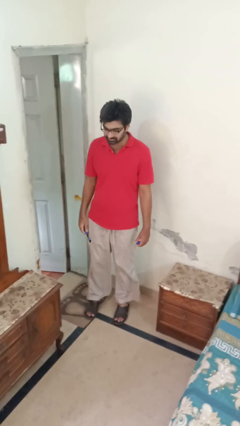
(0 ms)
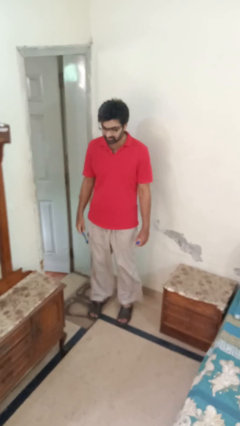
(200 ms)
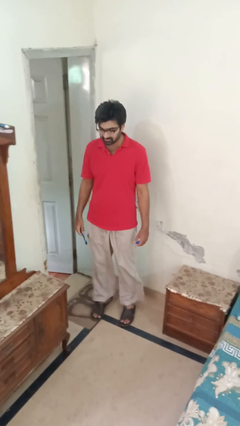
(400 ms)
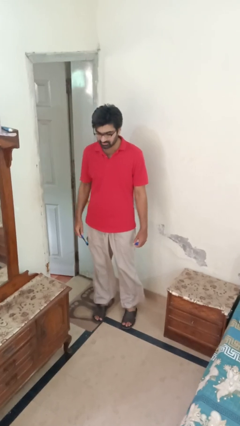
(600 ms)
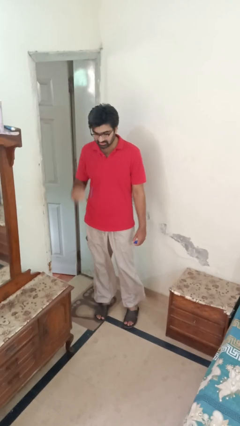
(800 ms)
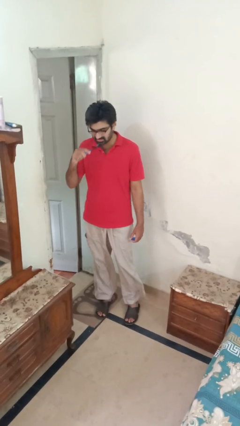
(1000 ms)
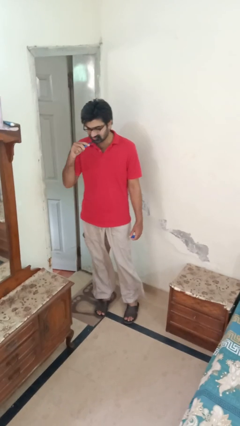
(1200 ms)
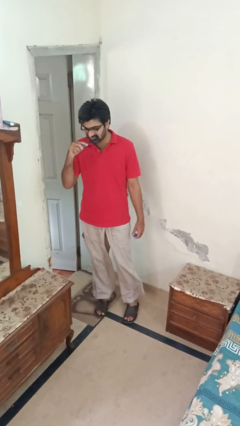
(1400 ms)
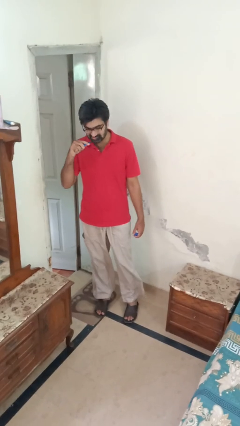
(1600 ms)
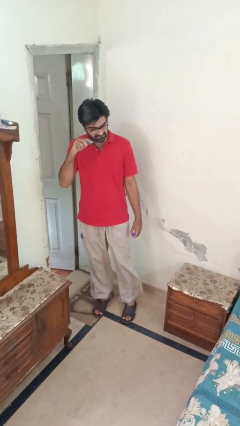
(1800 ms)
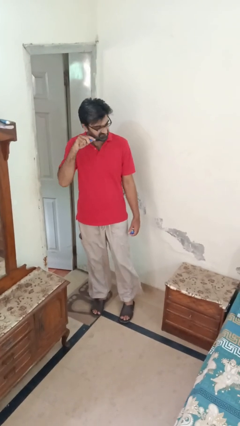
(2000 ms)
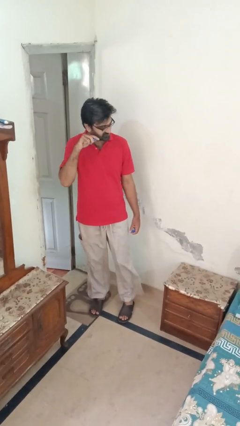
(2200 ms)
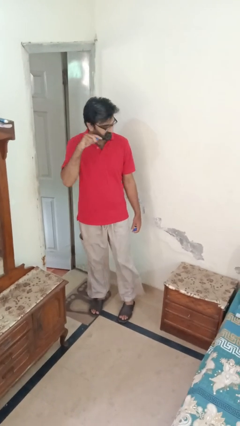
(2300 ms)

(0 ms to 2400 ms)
person brushes teeth

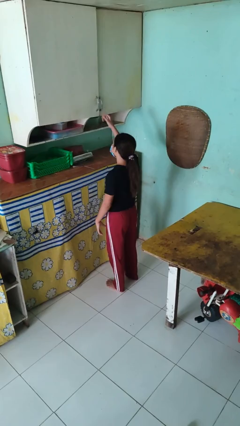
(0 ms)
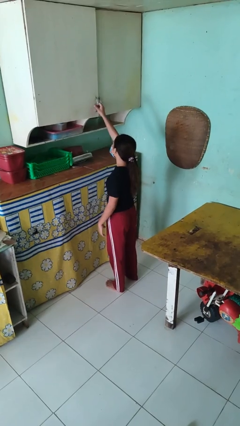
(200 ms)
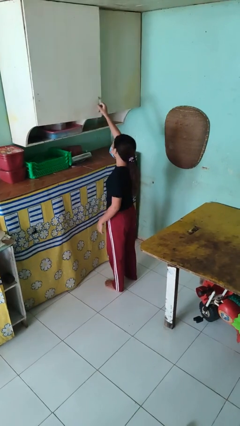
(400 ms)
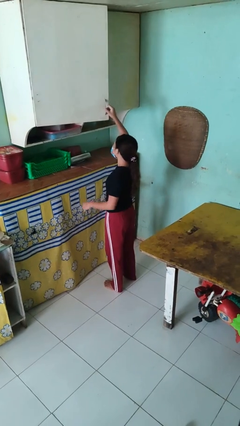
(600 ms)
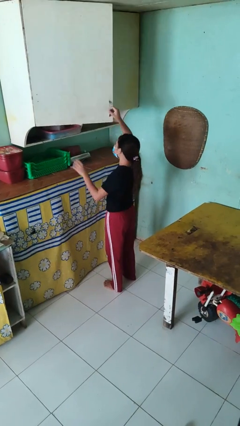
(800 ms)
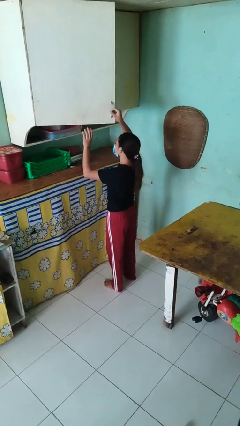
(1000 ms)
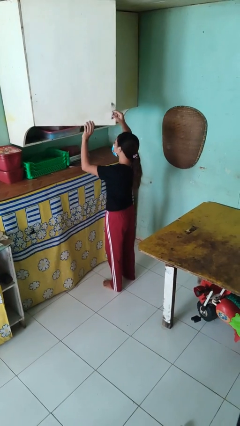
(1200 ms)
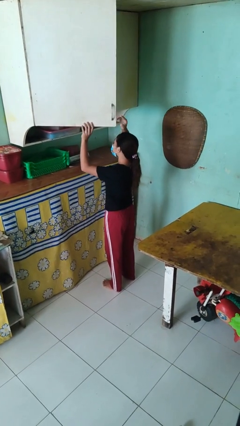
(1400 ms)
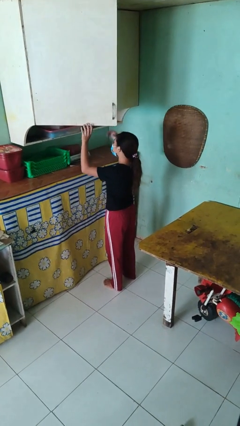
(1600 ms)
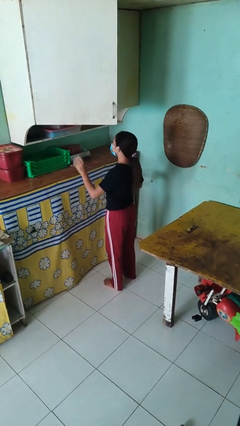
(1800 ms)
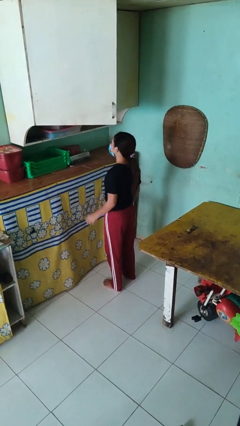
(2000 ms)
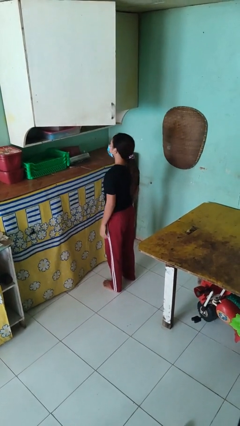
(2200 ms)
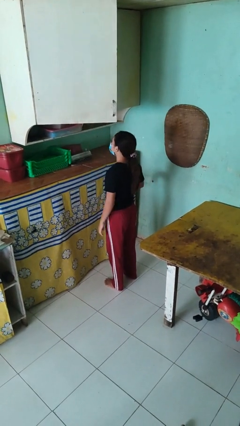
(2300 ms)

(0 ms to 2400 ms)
person opens cabinet

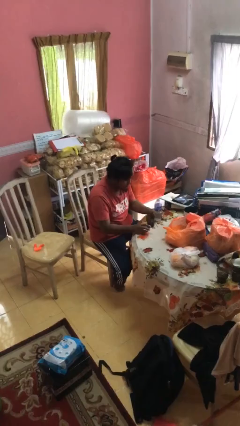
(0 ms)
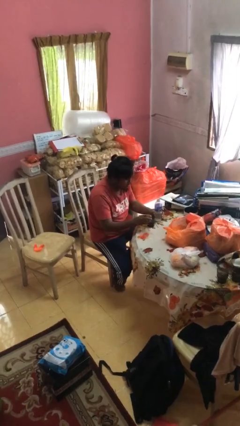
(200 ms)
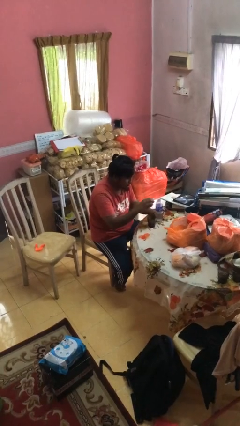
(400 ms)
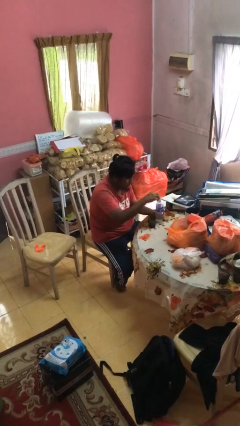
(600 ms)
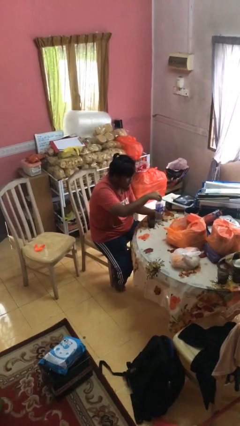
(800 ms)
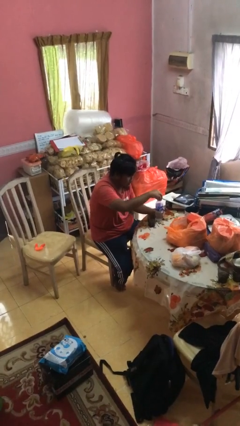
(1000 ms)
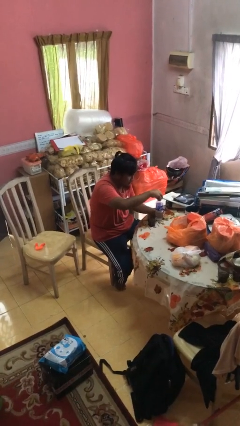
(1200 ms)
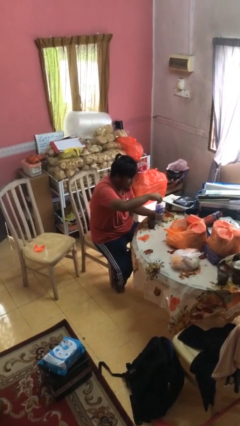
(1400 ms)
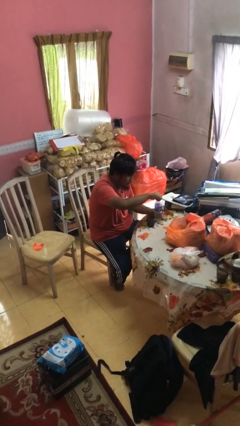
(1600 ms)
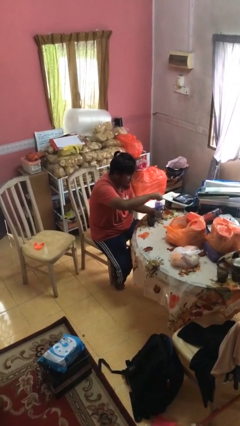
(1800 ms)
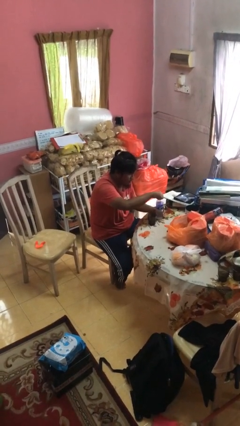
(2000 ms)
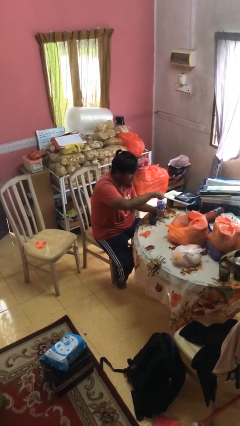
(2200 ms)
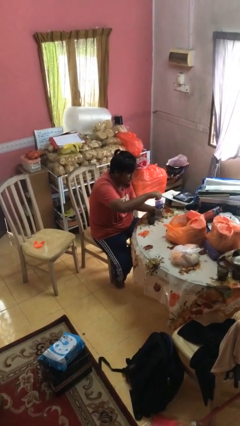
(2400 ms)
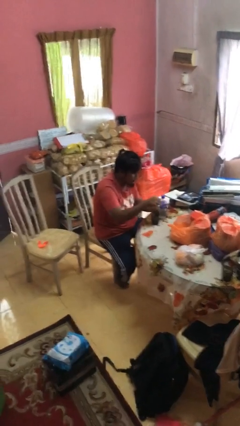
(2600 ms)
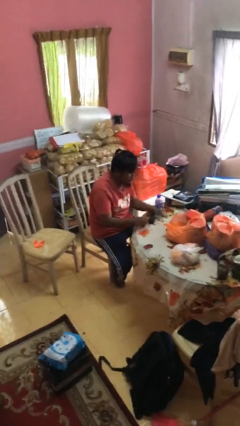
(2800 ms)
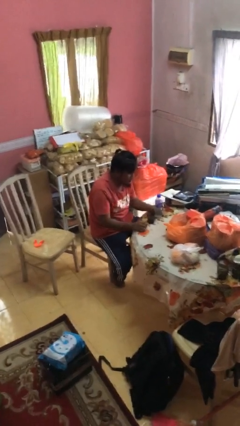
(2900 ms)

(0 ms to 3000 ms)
person screws lid to bottle

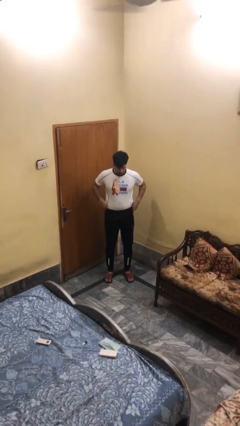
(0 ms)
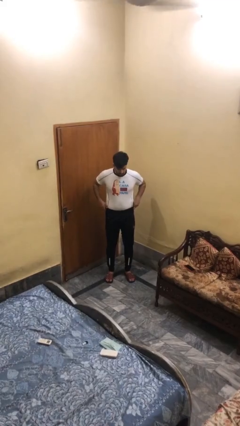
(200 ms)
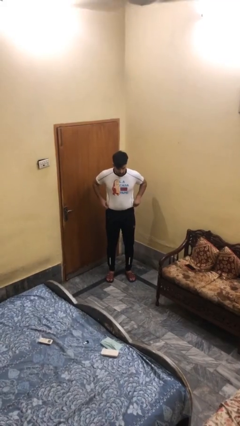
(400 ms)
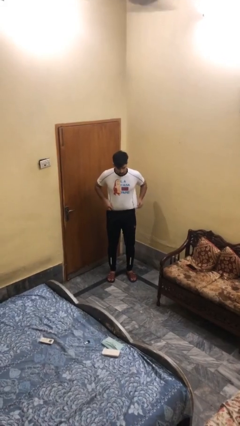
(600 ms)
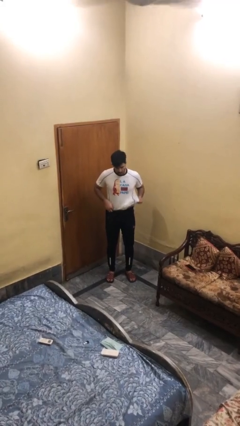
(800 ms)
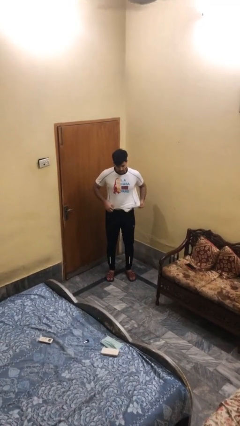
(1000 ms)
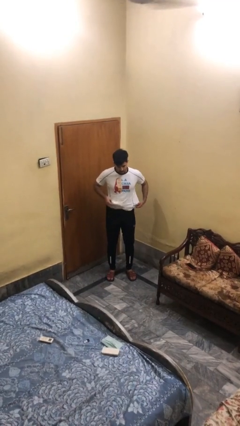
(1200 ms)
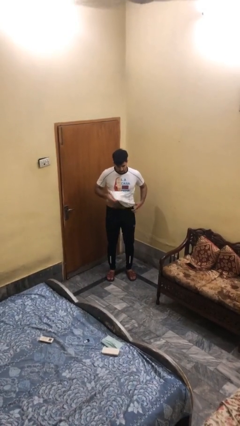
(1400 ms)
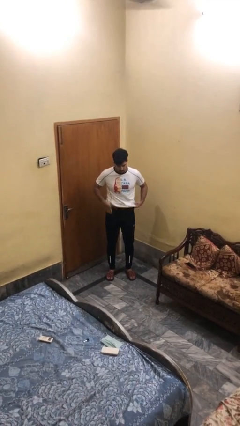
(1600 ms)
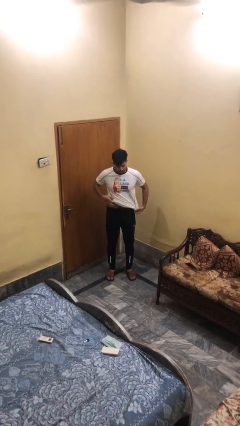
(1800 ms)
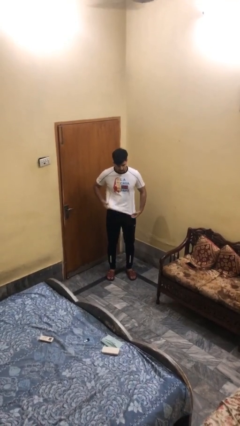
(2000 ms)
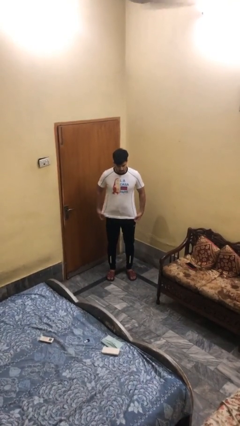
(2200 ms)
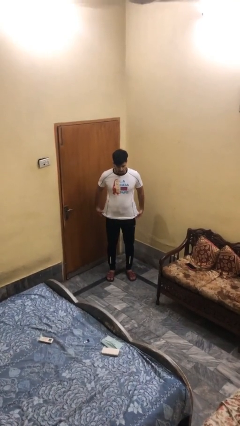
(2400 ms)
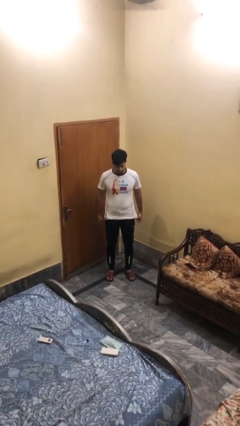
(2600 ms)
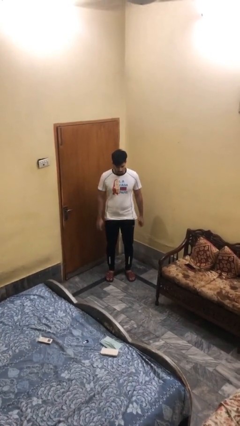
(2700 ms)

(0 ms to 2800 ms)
person untucks shirt

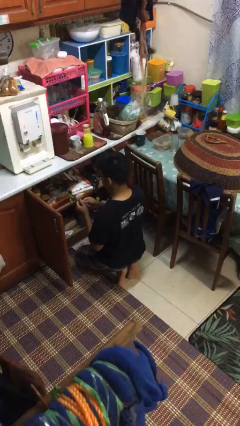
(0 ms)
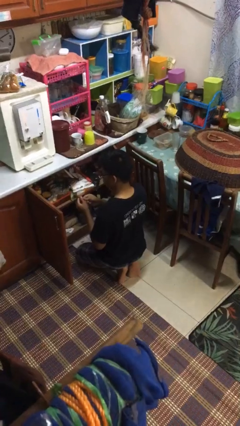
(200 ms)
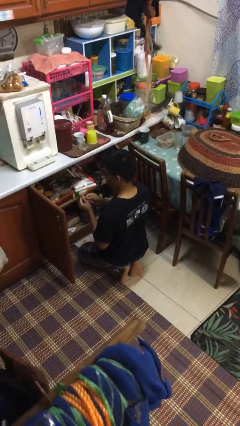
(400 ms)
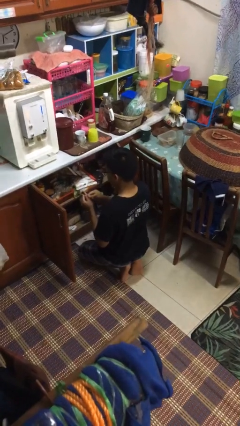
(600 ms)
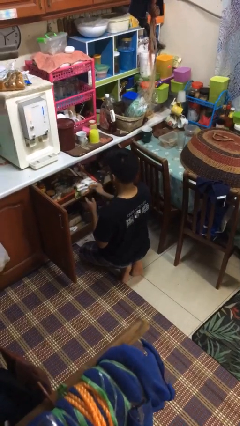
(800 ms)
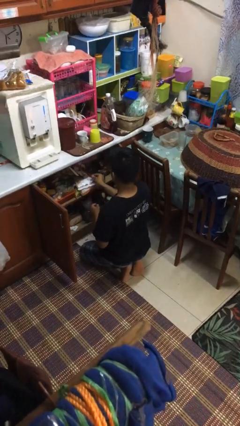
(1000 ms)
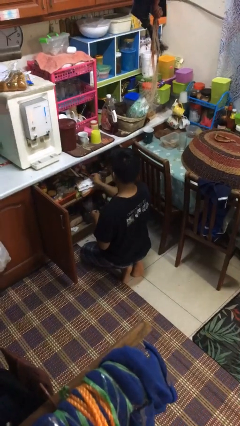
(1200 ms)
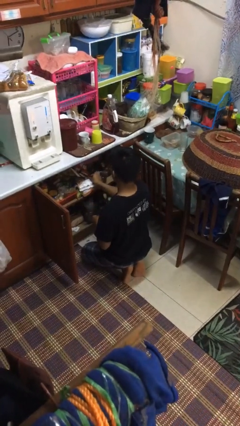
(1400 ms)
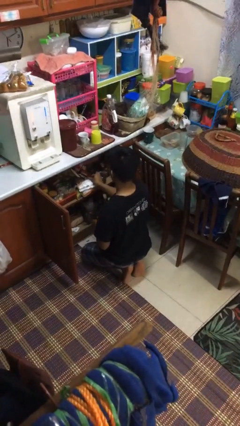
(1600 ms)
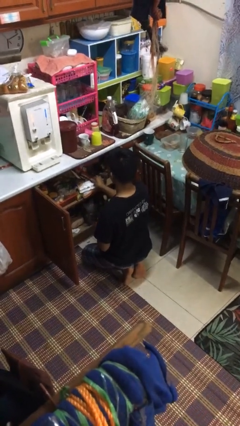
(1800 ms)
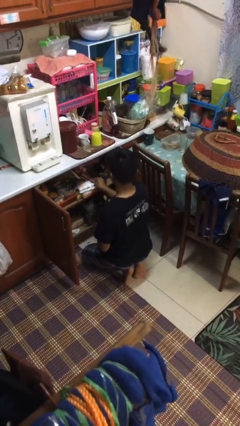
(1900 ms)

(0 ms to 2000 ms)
person puts object into kitchen drawer

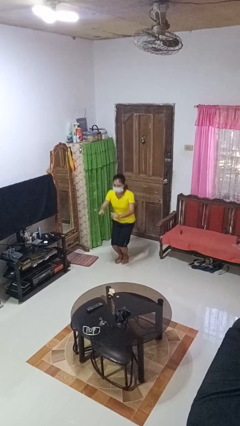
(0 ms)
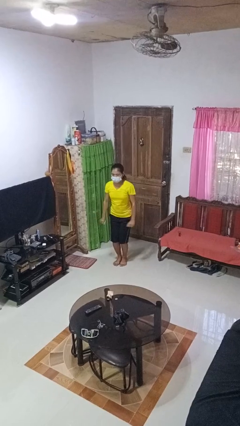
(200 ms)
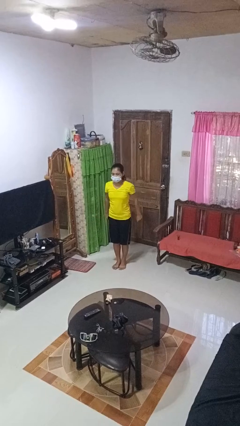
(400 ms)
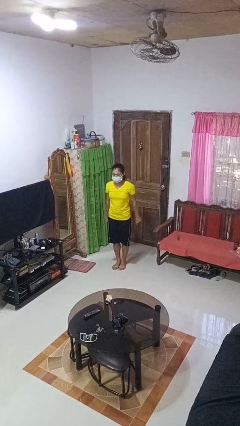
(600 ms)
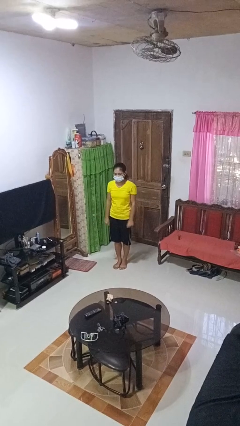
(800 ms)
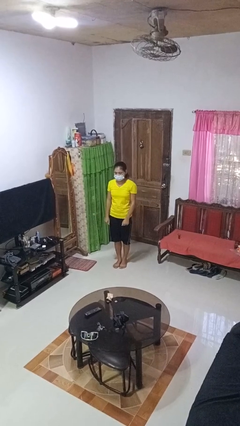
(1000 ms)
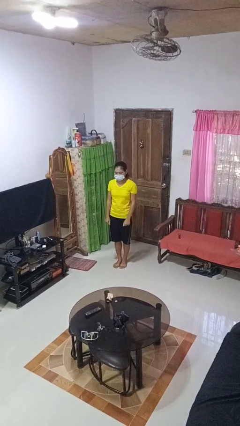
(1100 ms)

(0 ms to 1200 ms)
person stands up

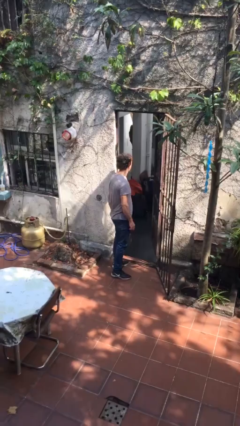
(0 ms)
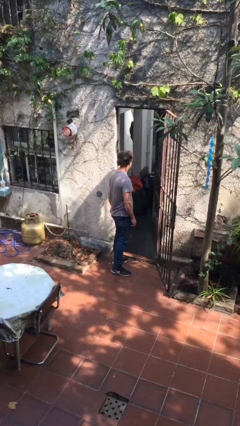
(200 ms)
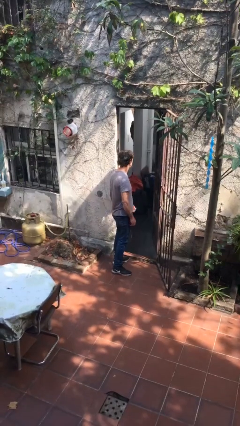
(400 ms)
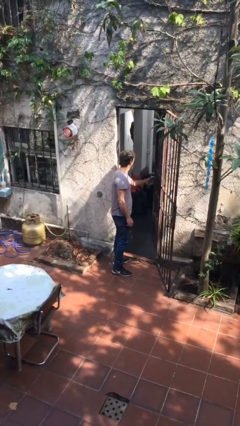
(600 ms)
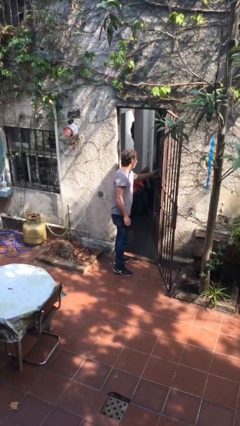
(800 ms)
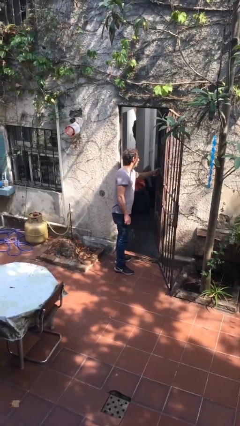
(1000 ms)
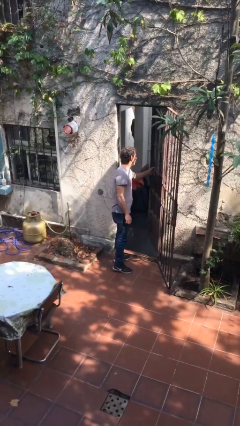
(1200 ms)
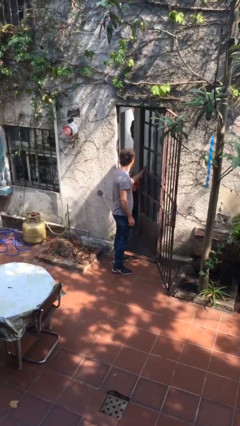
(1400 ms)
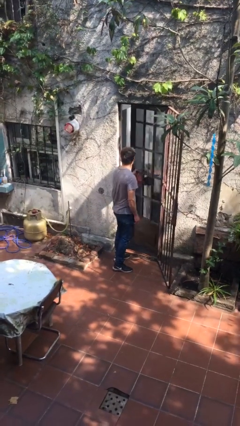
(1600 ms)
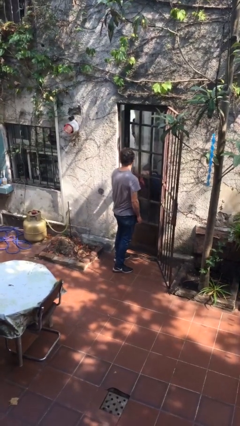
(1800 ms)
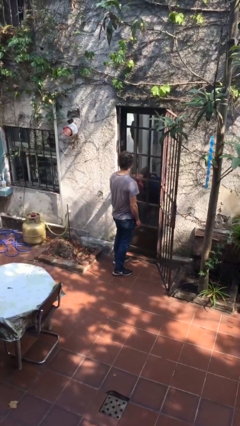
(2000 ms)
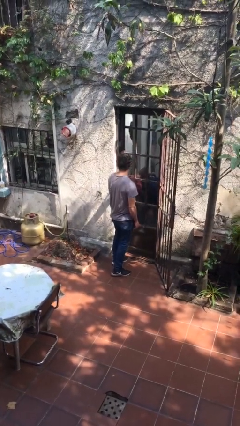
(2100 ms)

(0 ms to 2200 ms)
person closes facility door

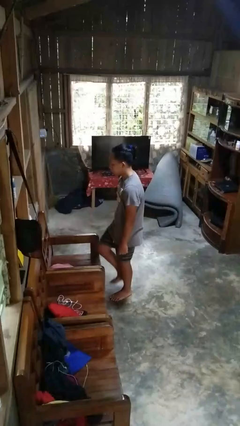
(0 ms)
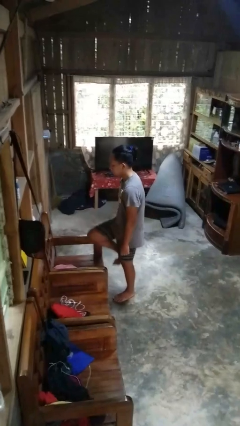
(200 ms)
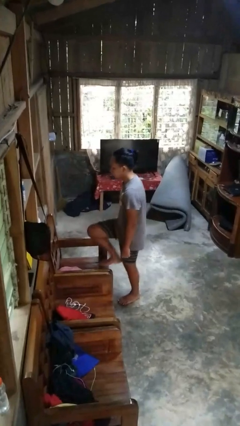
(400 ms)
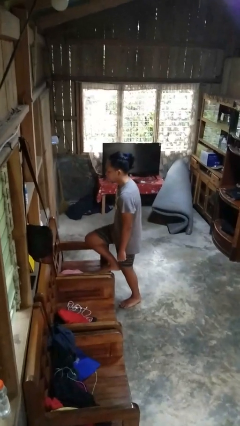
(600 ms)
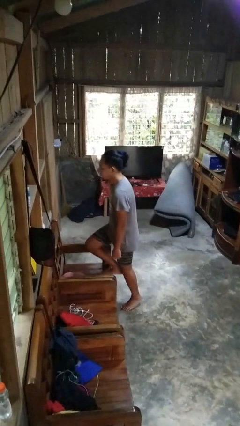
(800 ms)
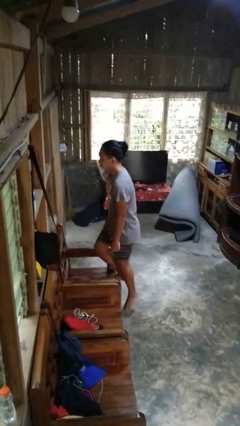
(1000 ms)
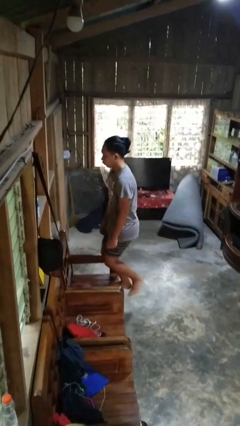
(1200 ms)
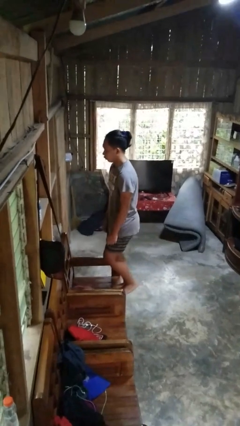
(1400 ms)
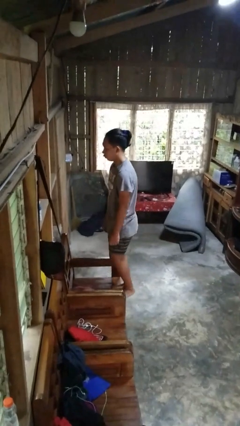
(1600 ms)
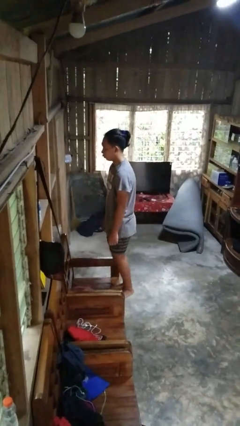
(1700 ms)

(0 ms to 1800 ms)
person climbs on chair
